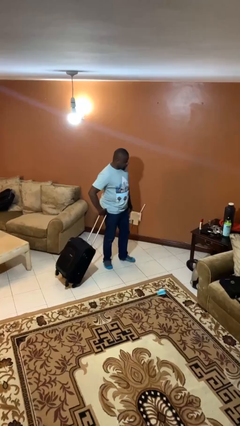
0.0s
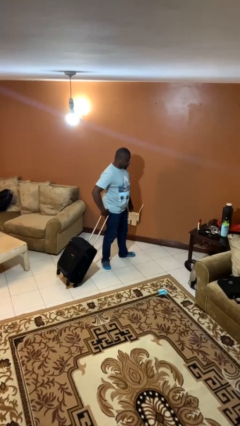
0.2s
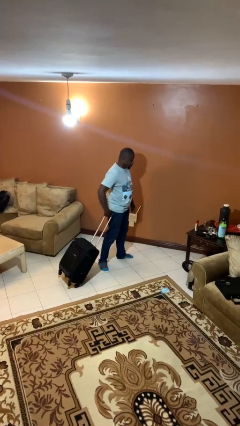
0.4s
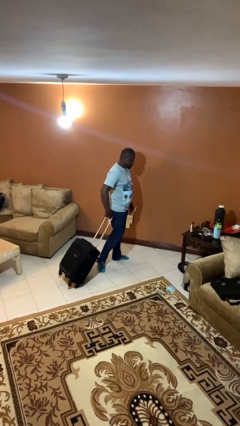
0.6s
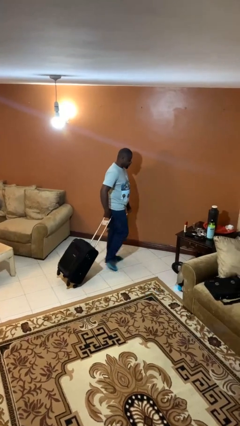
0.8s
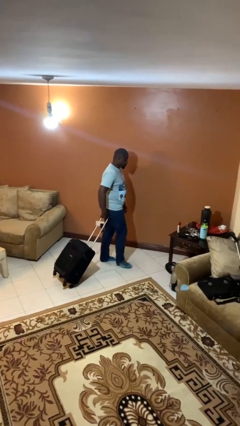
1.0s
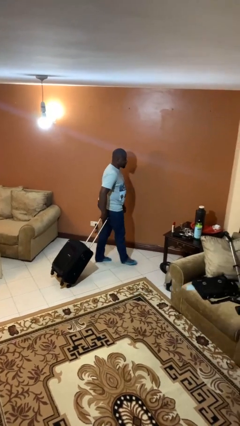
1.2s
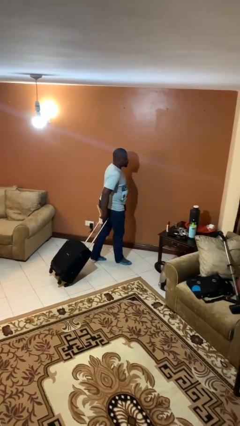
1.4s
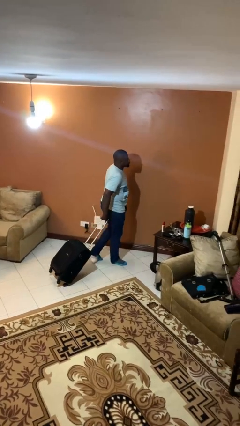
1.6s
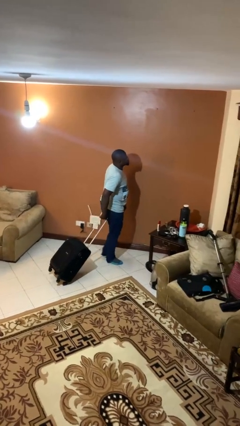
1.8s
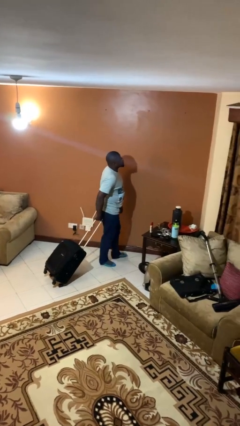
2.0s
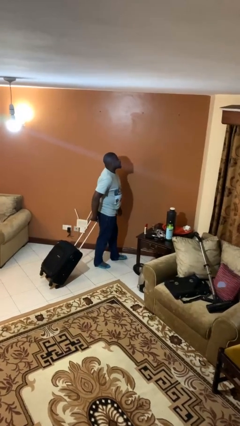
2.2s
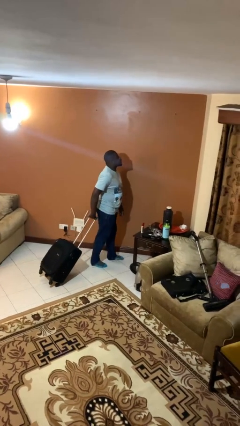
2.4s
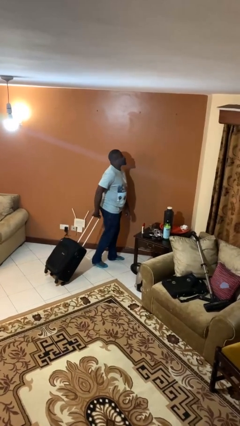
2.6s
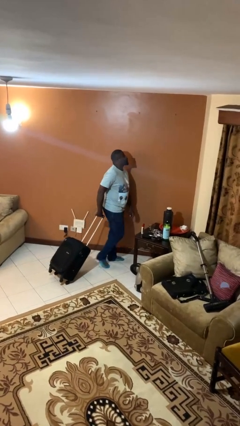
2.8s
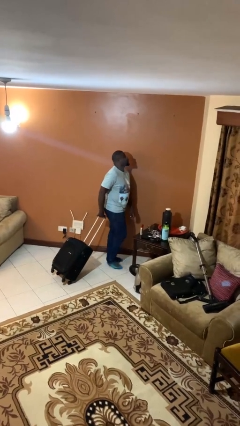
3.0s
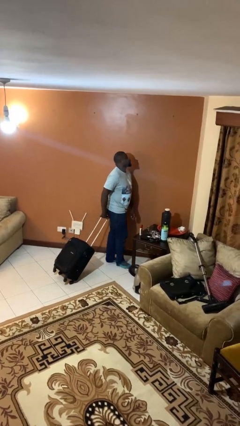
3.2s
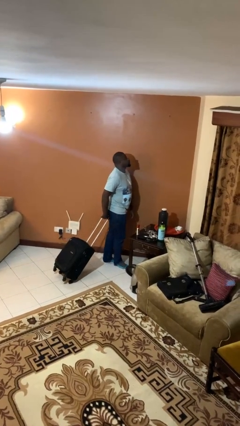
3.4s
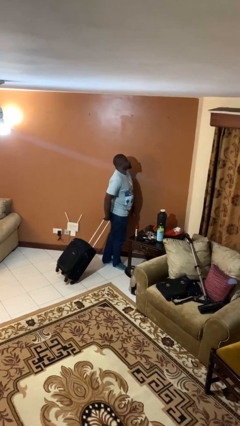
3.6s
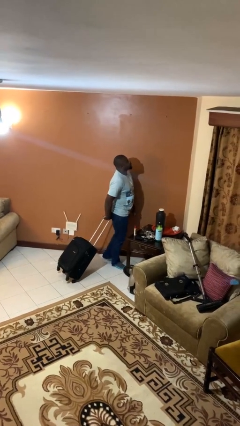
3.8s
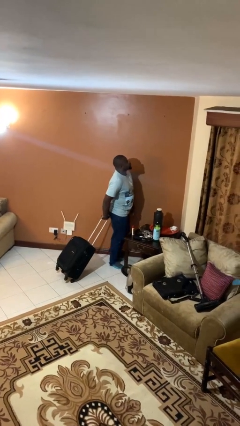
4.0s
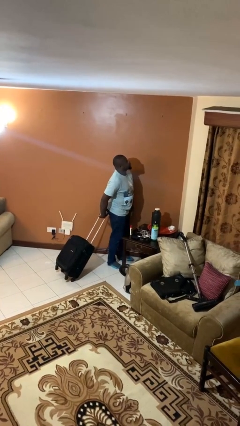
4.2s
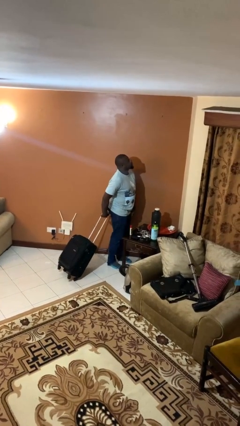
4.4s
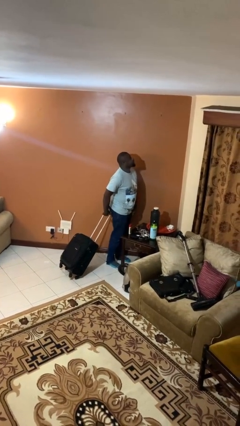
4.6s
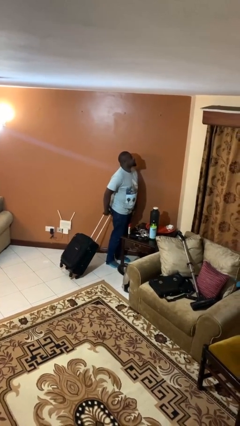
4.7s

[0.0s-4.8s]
person pulls wheeled cart

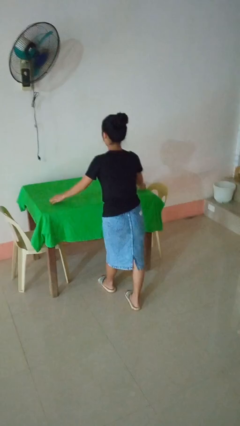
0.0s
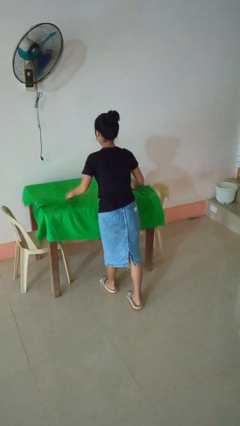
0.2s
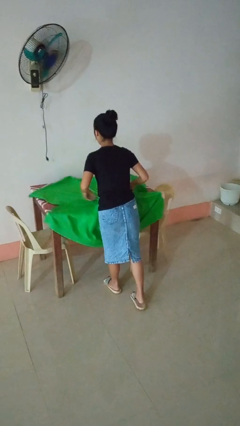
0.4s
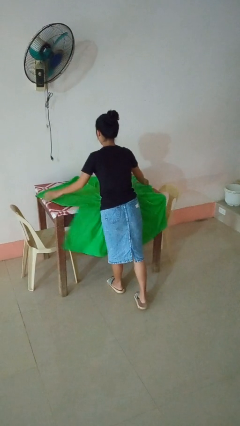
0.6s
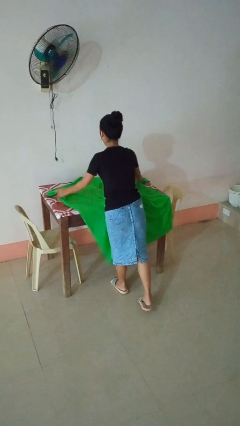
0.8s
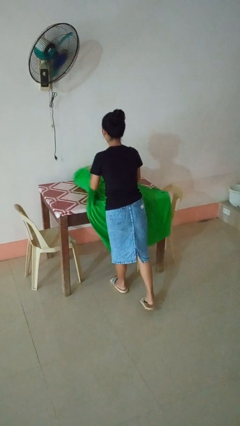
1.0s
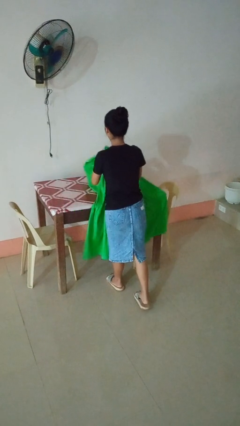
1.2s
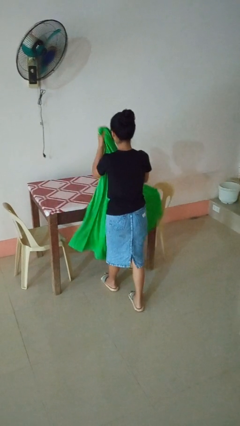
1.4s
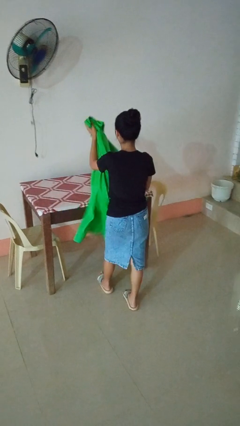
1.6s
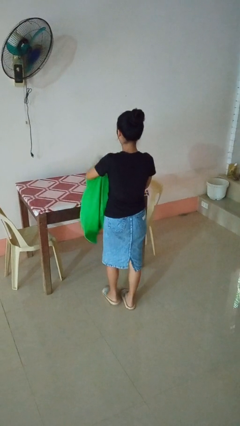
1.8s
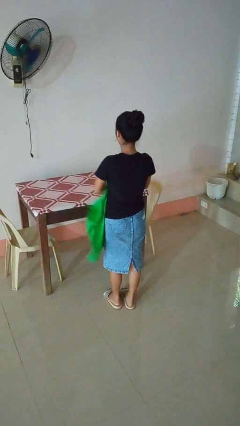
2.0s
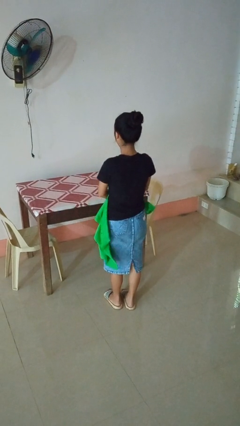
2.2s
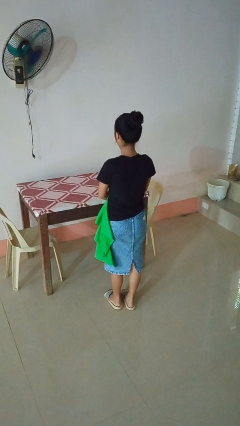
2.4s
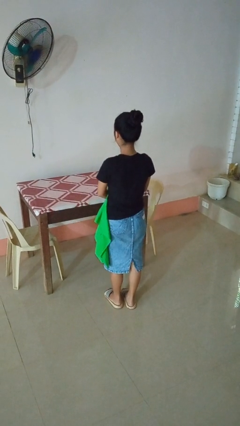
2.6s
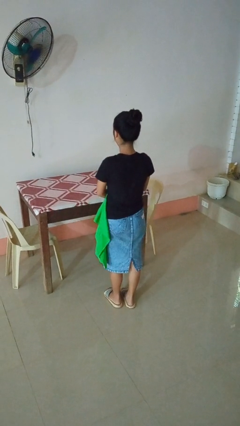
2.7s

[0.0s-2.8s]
person folds tablecloth

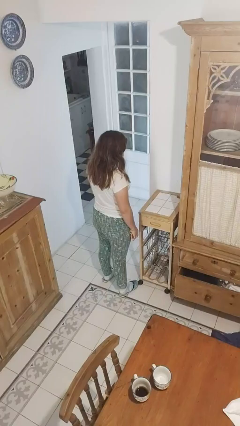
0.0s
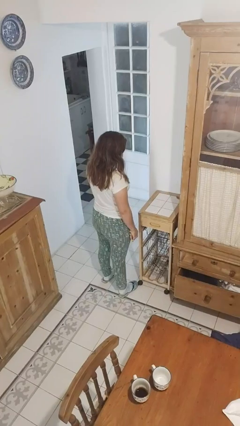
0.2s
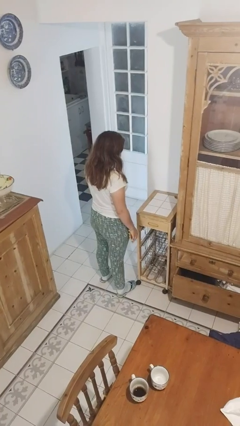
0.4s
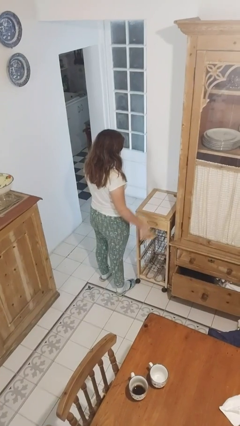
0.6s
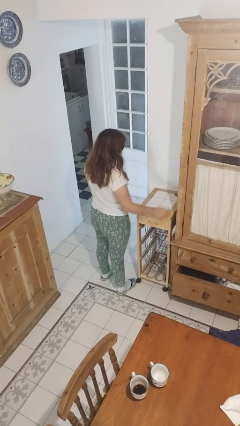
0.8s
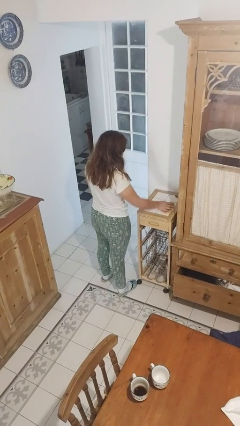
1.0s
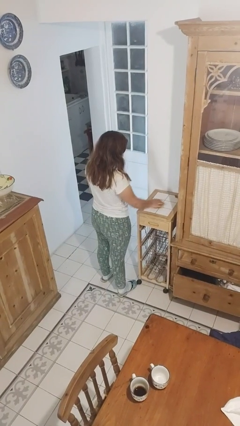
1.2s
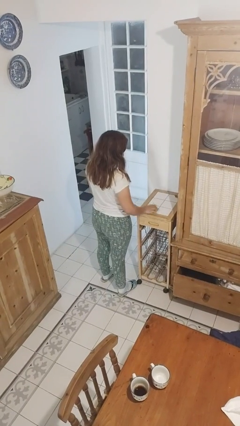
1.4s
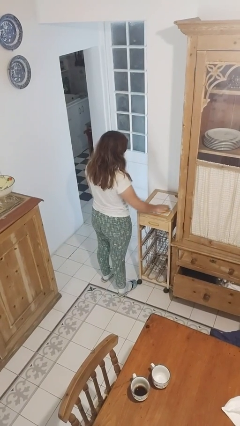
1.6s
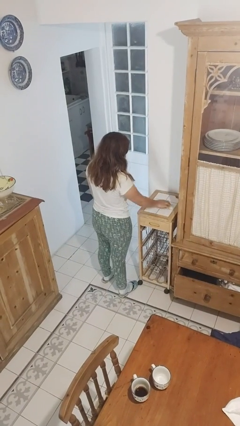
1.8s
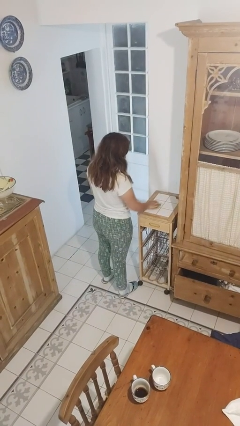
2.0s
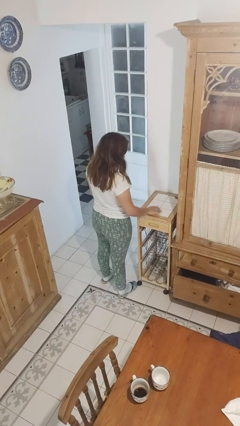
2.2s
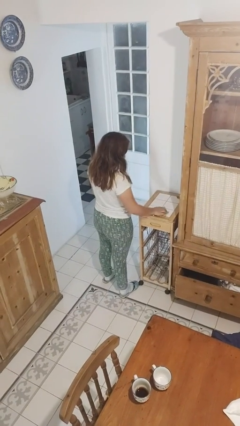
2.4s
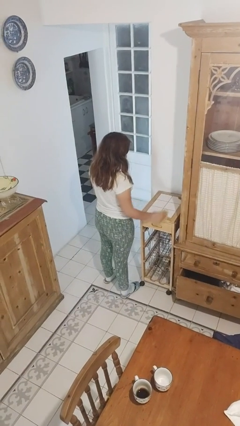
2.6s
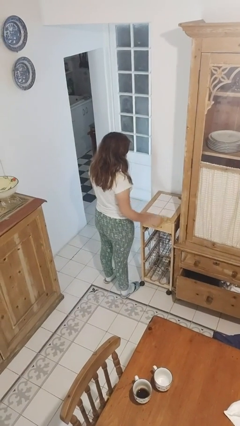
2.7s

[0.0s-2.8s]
person cleans table with rag

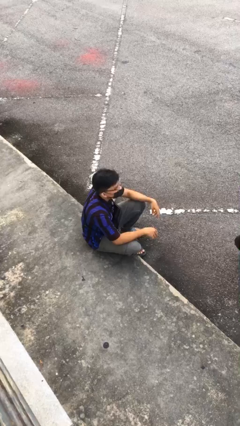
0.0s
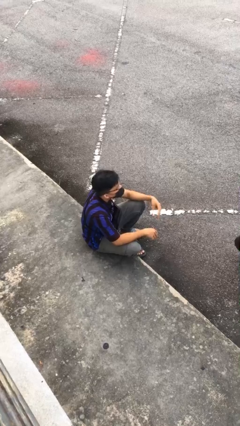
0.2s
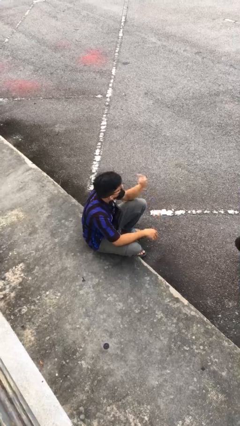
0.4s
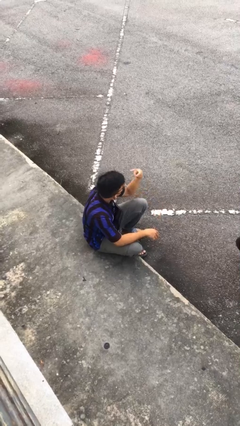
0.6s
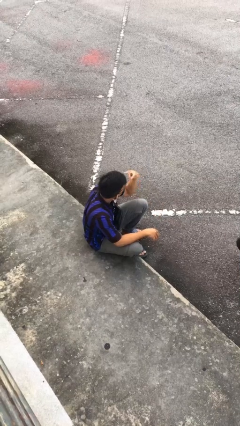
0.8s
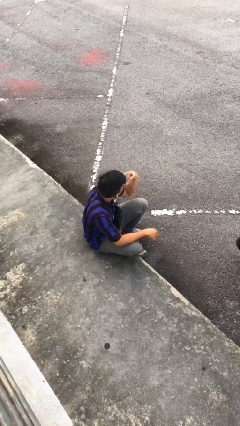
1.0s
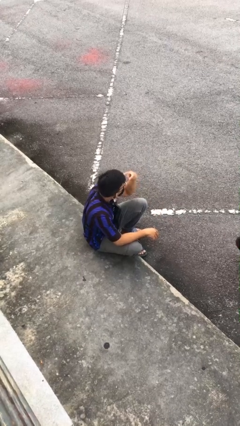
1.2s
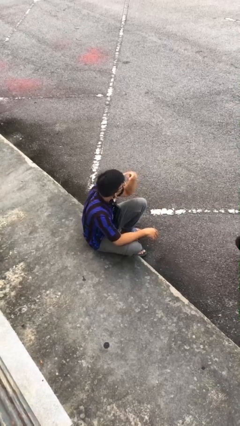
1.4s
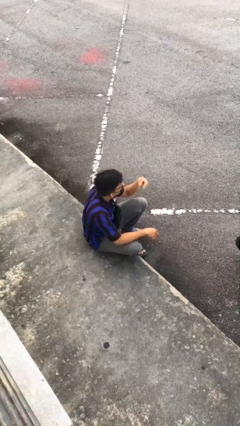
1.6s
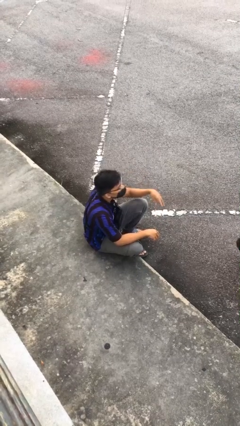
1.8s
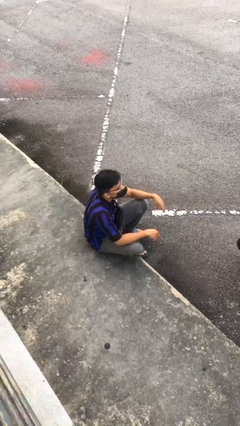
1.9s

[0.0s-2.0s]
person gestures watch closely

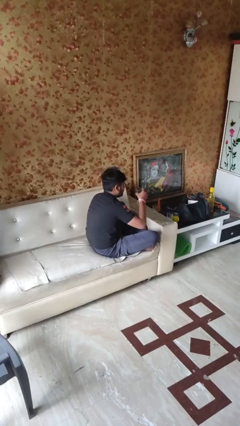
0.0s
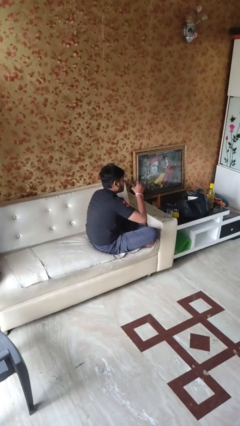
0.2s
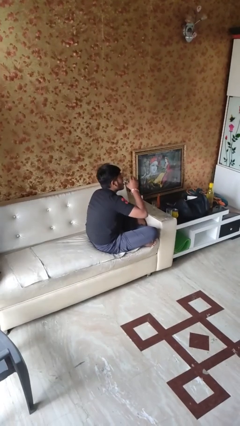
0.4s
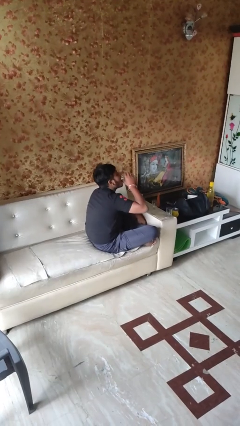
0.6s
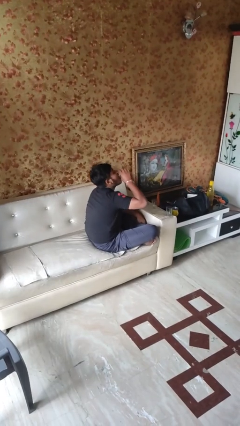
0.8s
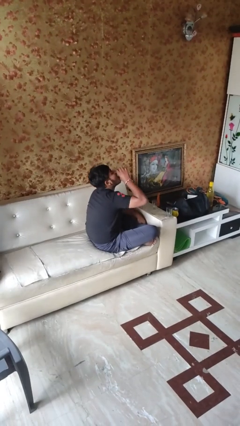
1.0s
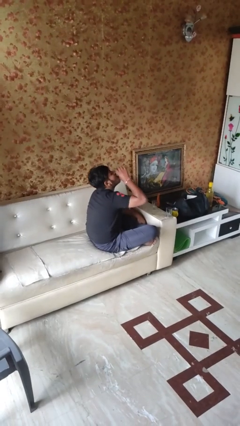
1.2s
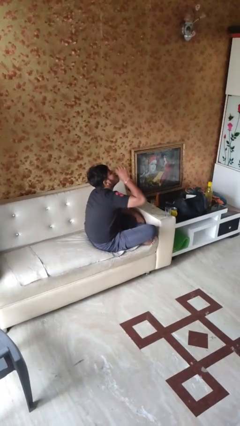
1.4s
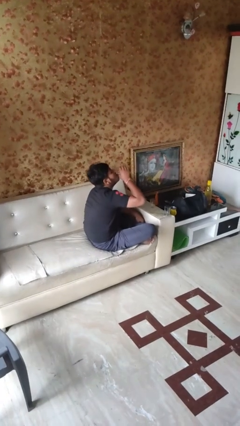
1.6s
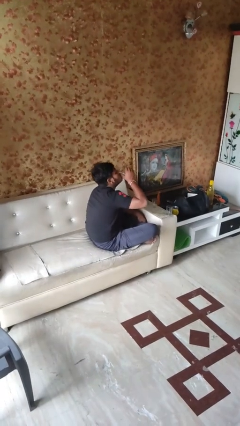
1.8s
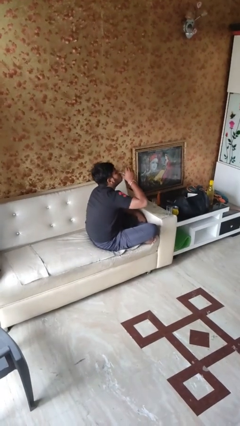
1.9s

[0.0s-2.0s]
person drinks from shotglass

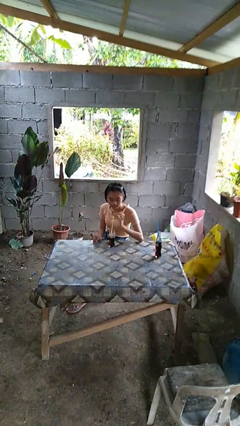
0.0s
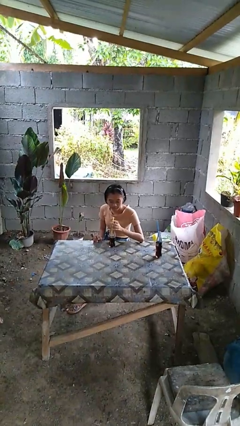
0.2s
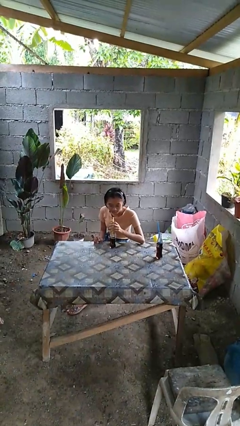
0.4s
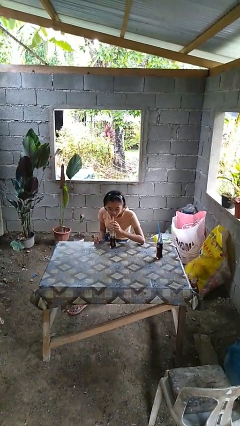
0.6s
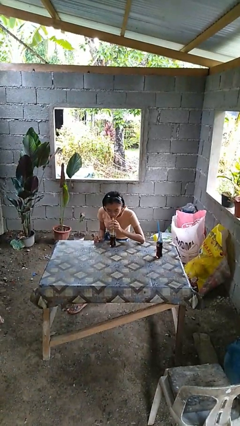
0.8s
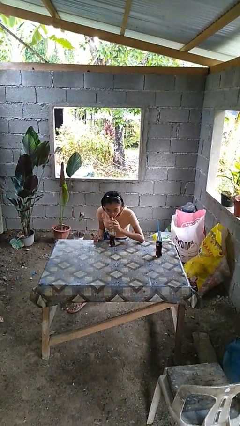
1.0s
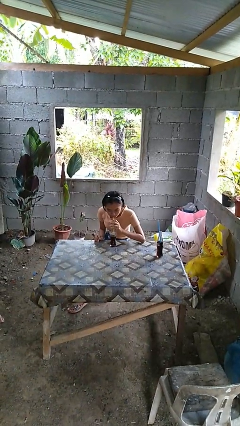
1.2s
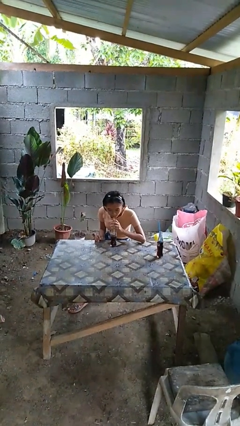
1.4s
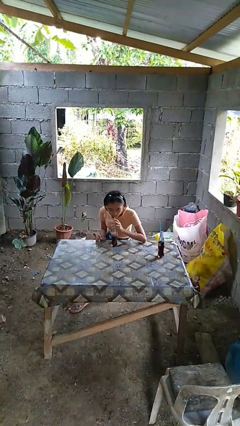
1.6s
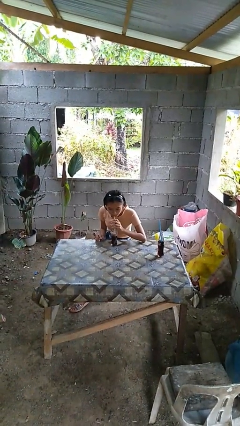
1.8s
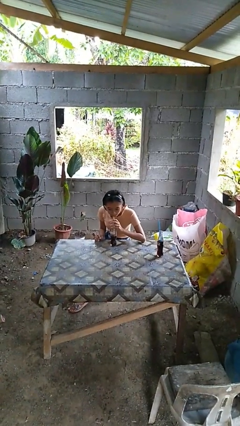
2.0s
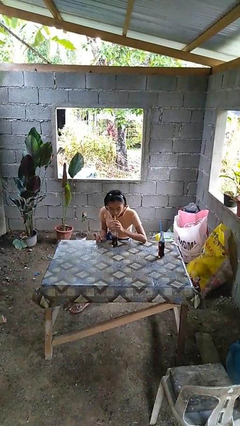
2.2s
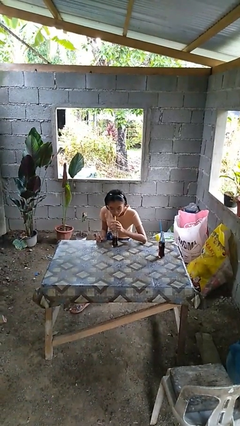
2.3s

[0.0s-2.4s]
person drinks from straw

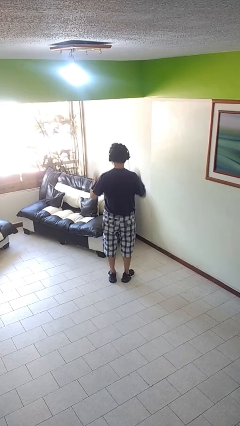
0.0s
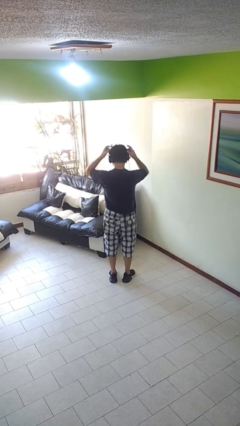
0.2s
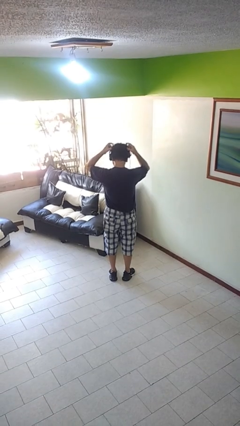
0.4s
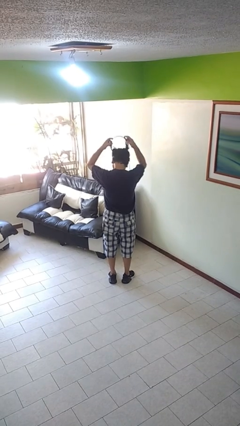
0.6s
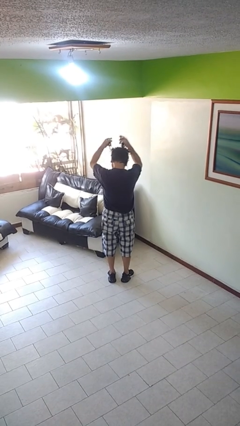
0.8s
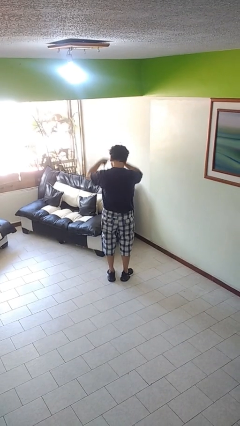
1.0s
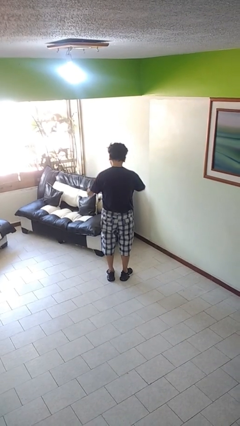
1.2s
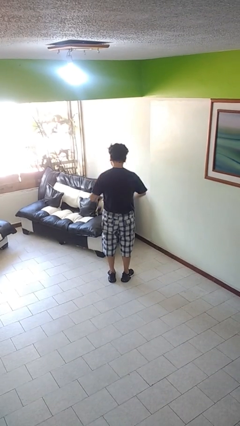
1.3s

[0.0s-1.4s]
person takes off headphones
